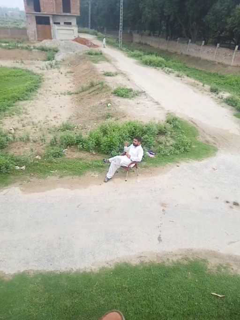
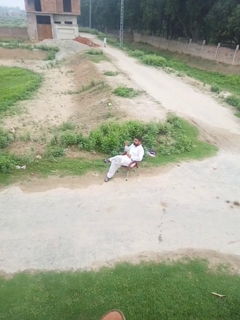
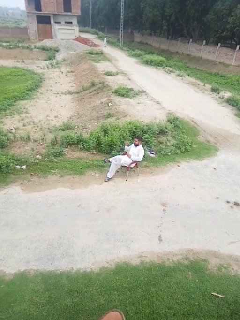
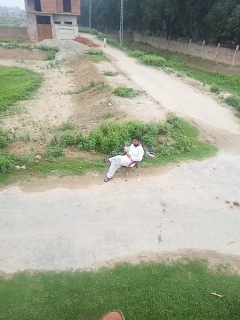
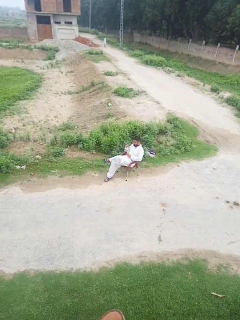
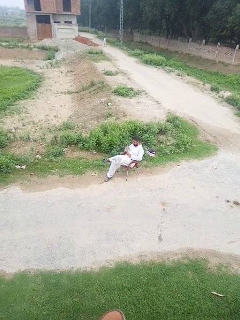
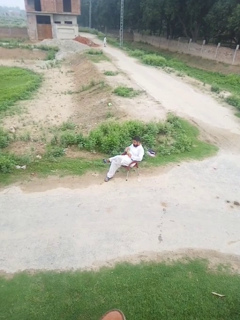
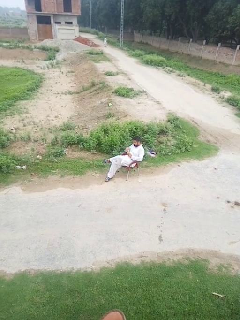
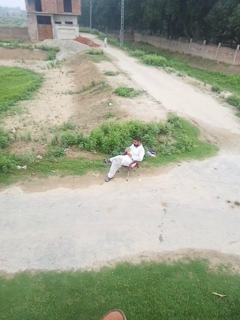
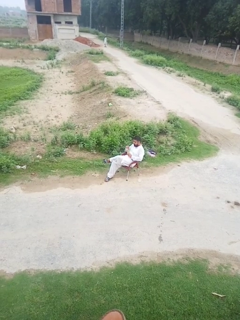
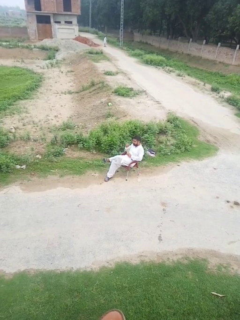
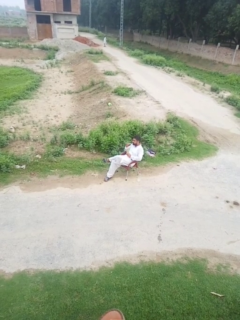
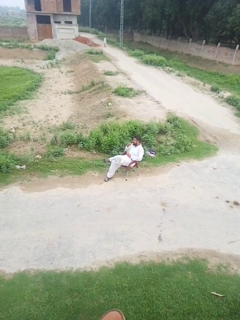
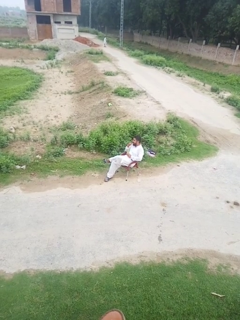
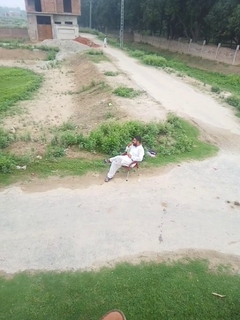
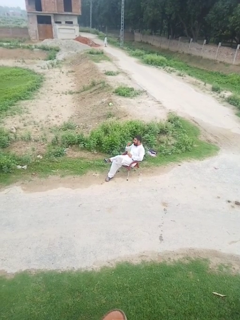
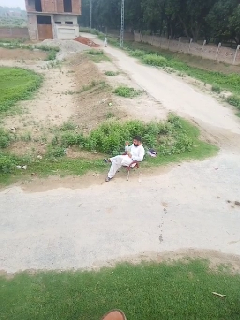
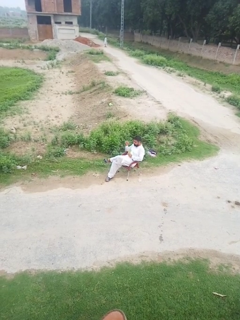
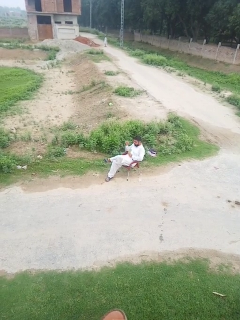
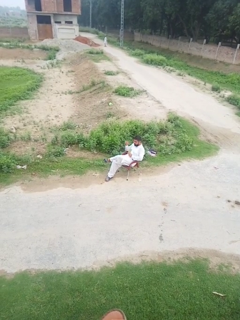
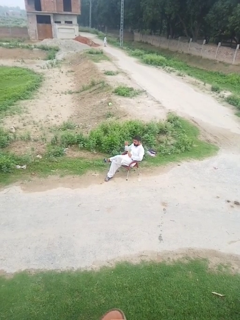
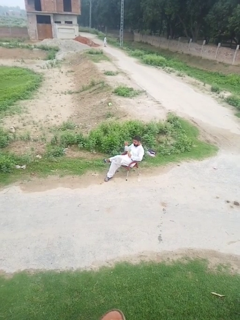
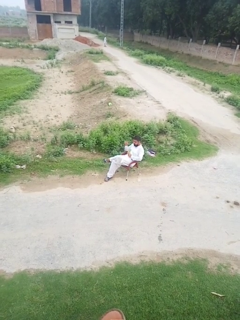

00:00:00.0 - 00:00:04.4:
person eats snack from bag

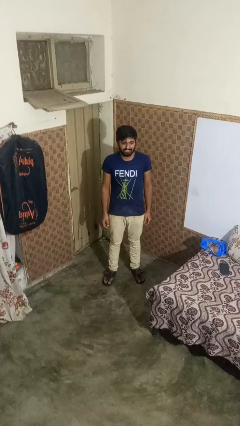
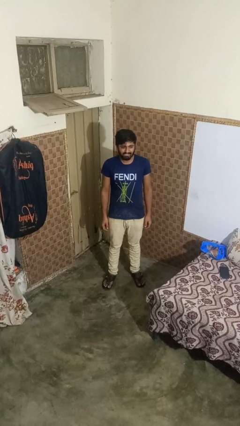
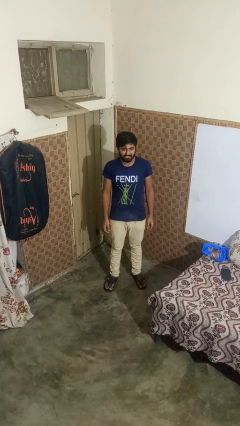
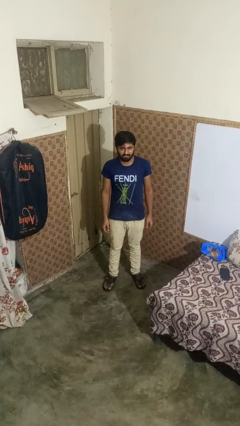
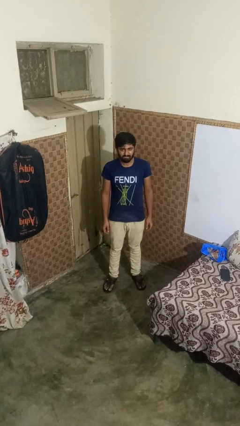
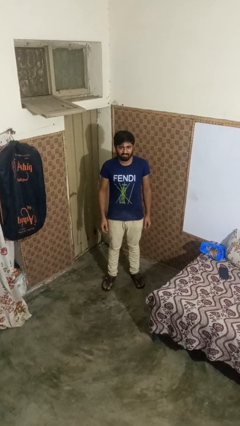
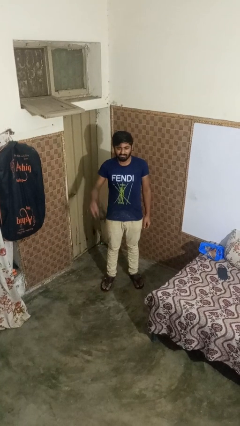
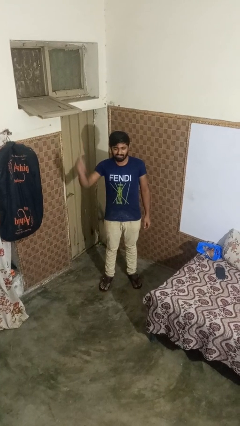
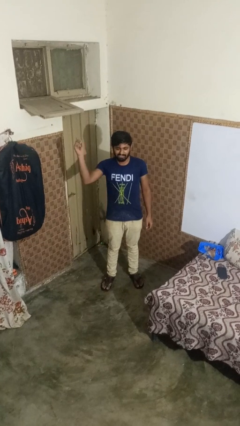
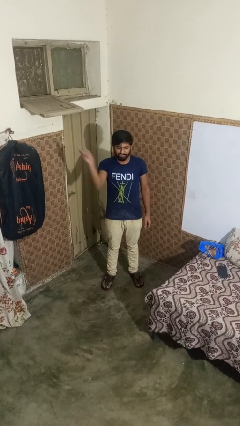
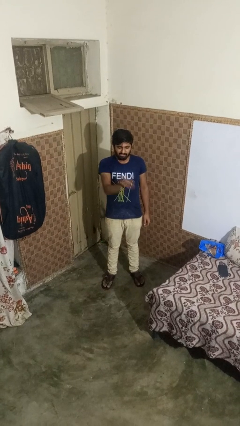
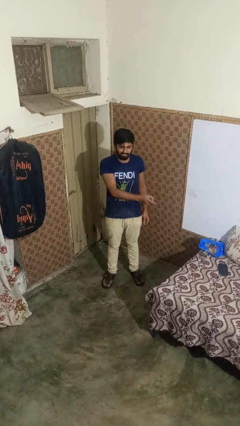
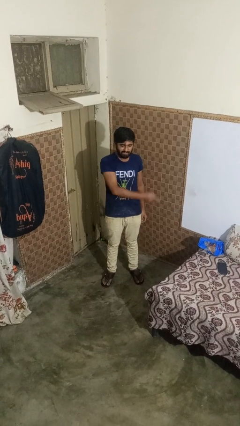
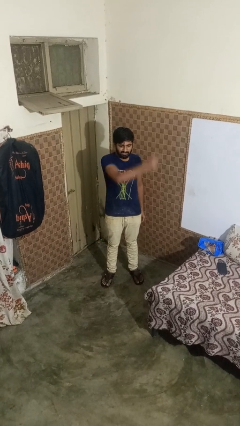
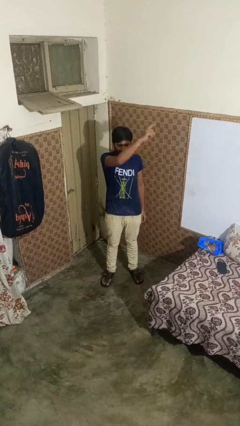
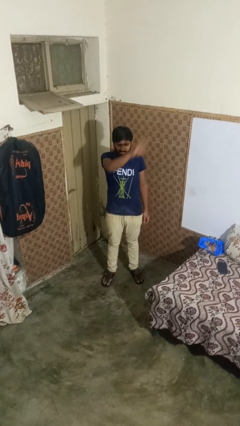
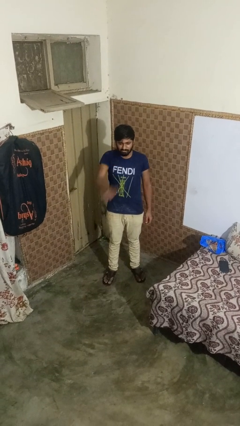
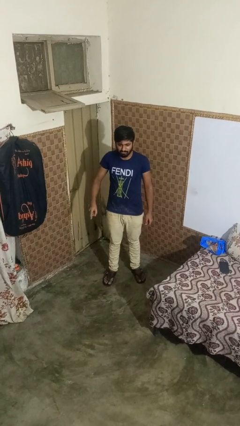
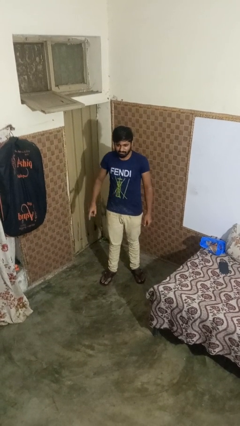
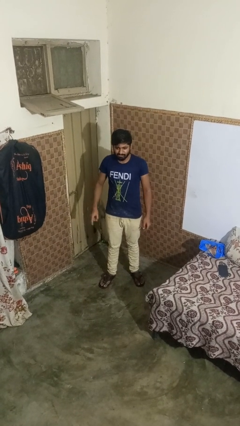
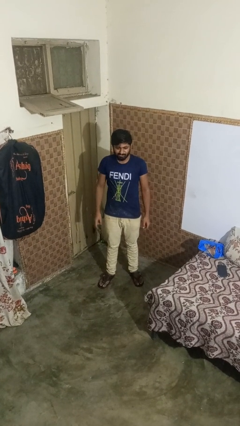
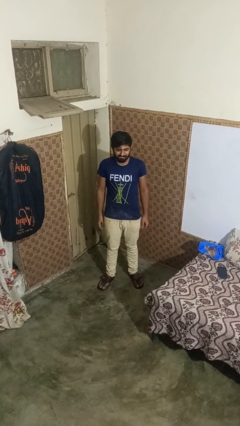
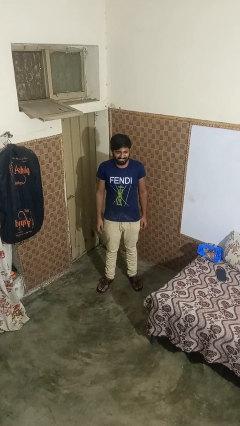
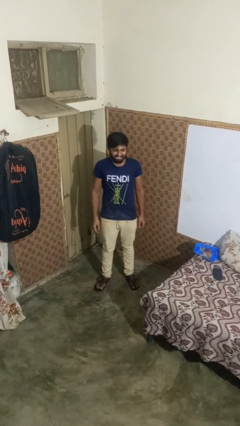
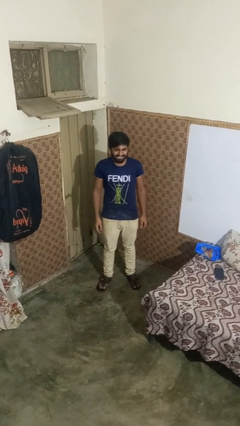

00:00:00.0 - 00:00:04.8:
person gestures cut

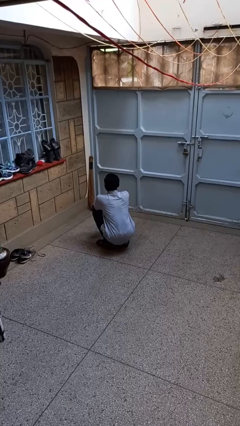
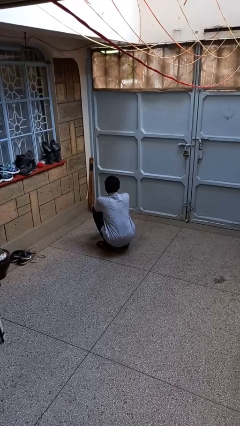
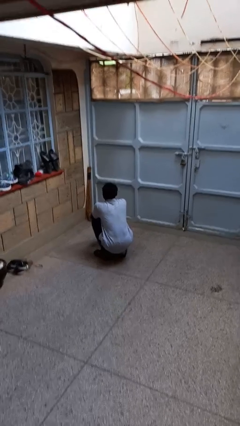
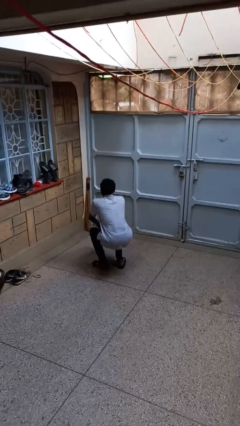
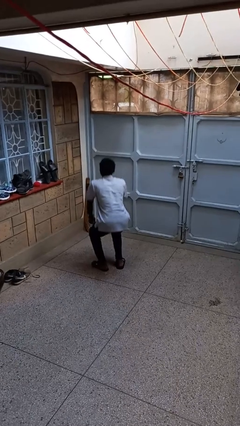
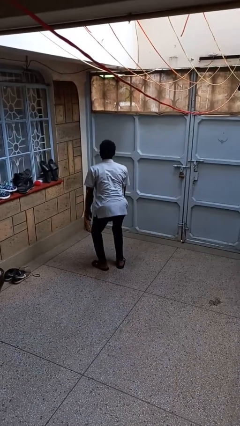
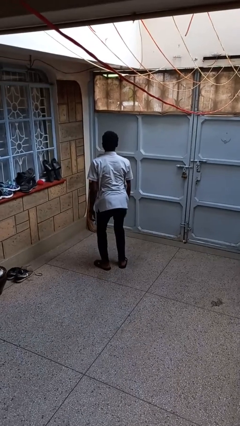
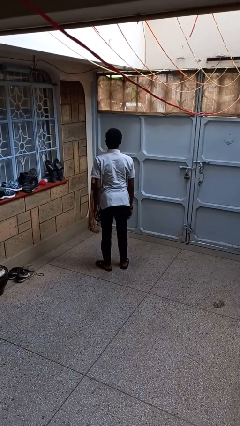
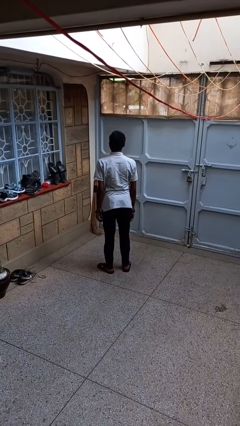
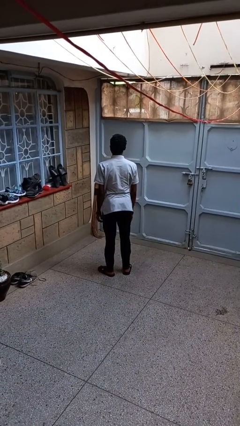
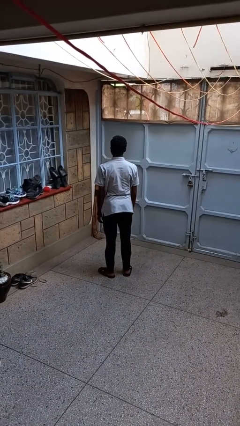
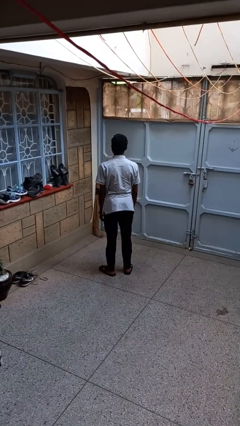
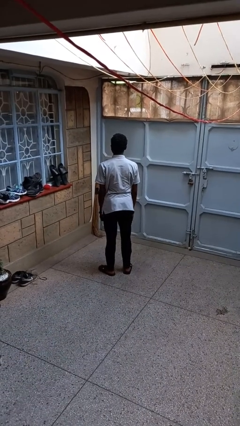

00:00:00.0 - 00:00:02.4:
person stands up

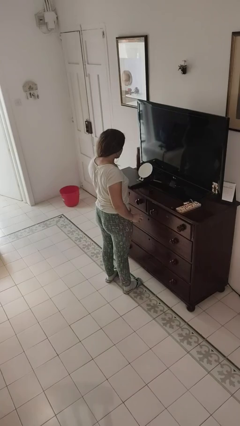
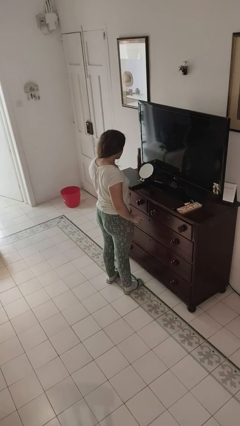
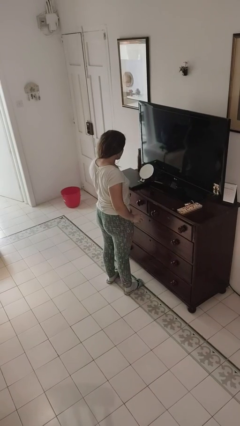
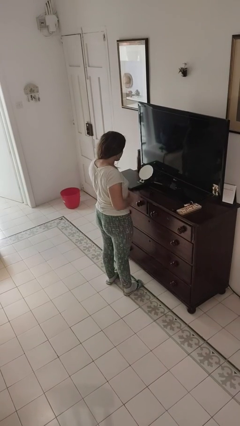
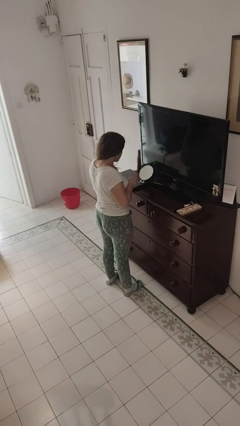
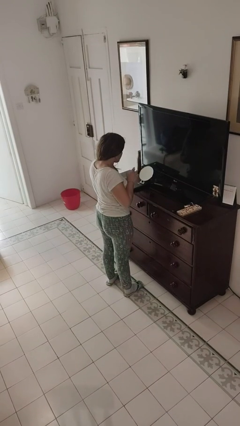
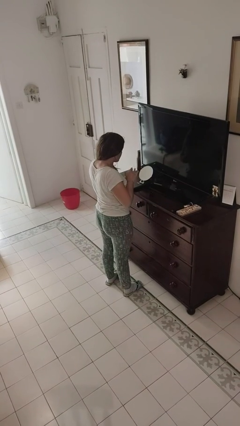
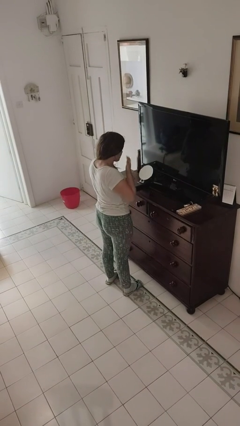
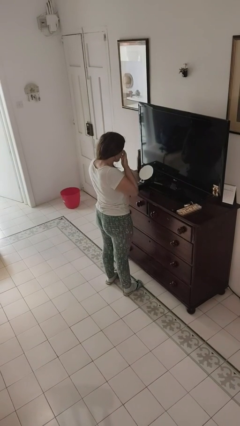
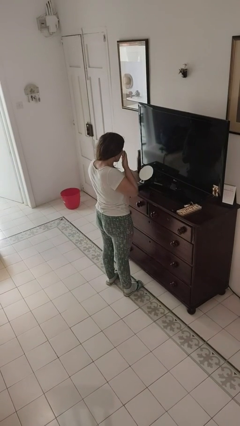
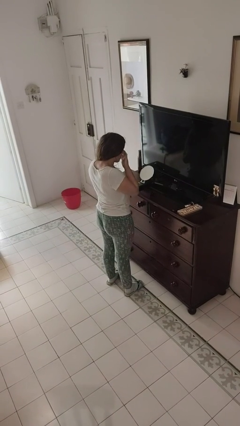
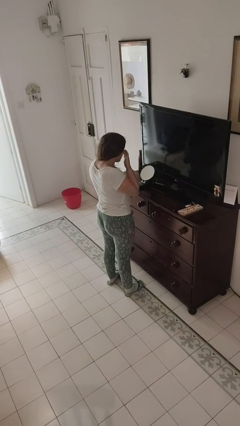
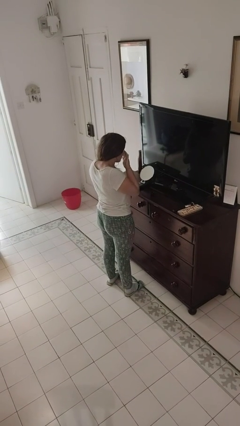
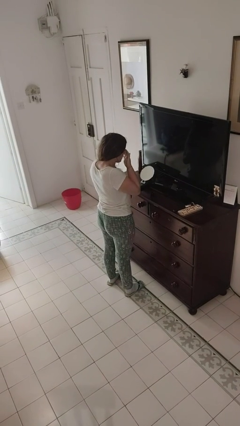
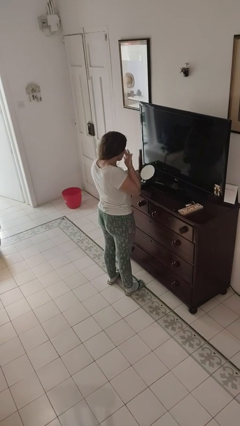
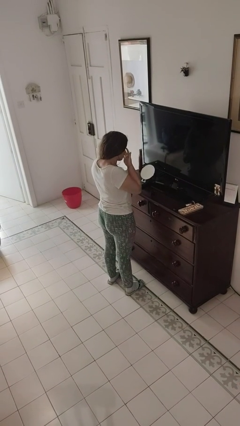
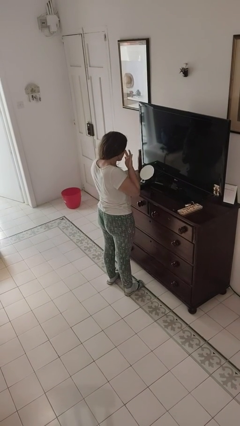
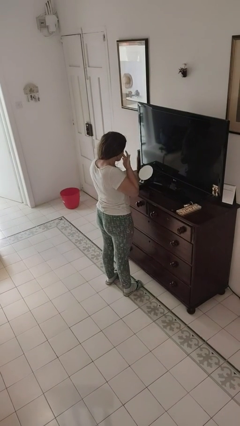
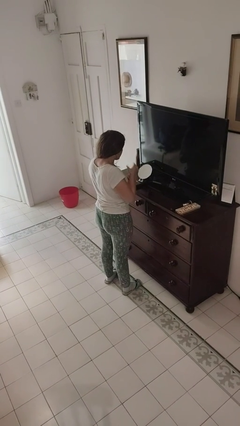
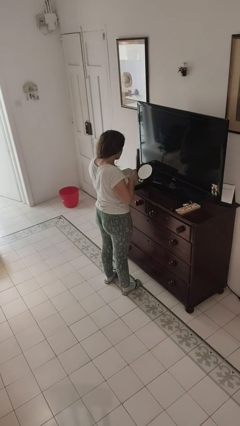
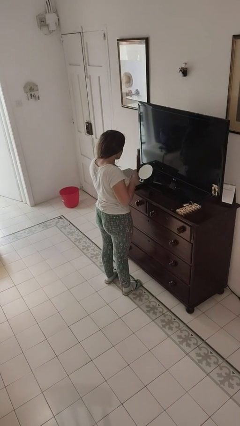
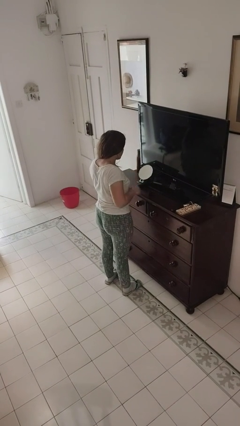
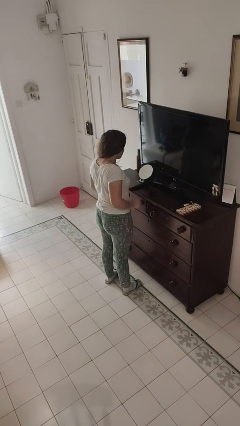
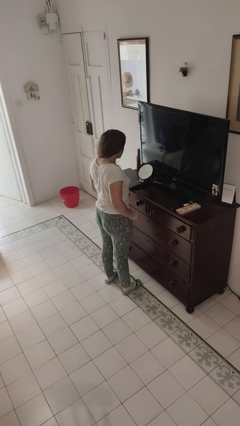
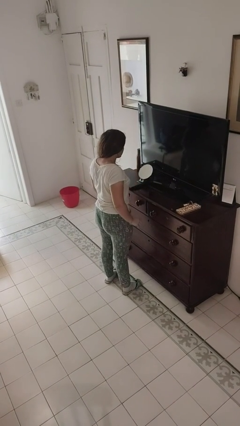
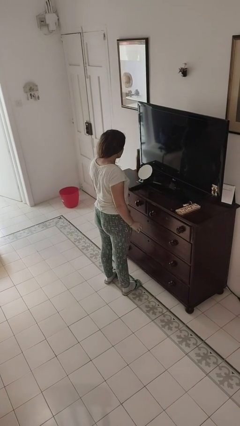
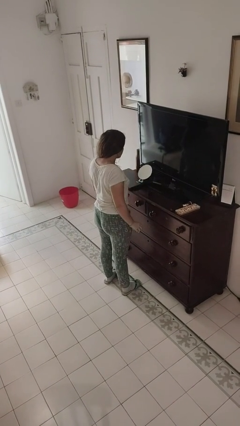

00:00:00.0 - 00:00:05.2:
person applies foundation makeup

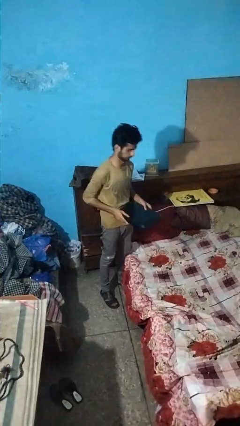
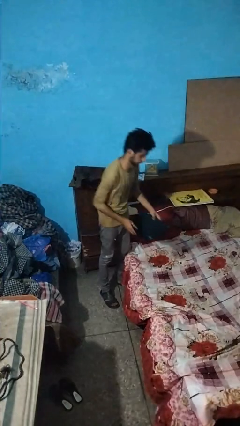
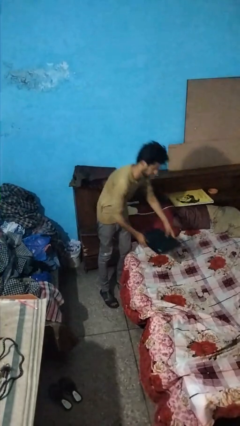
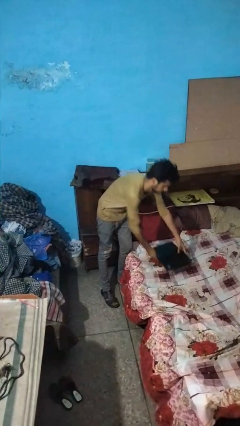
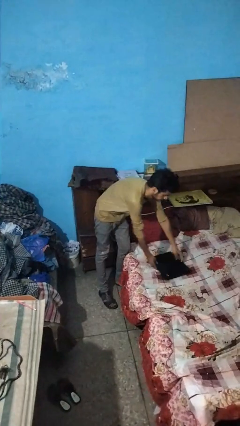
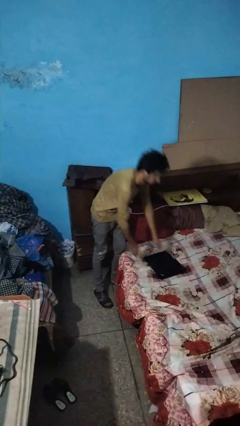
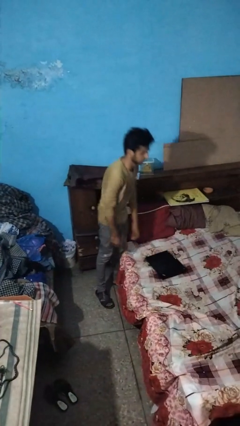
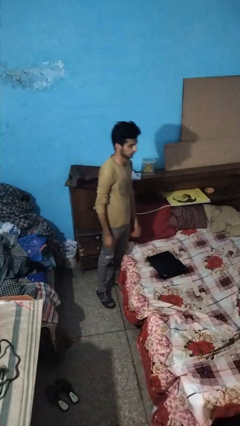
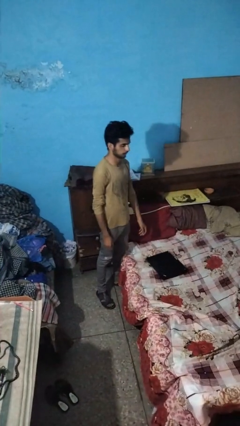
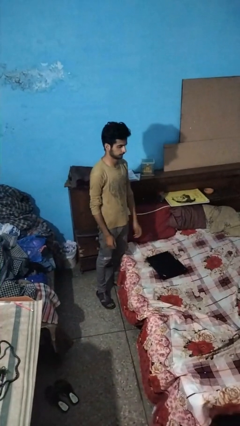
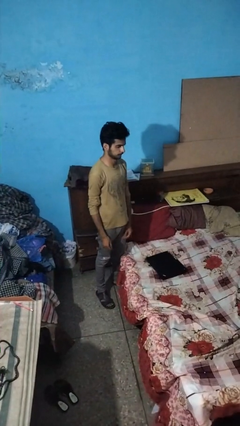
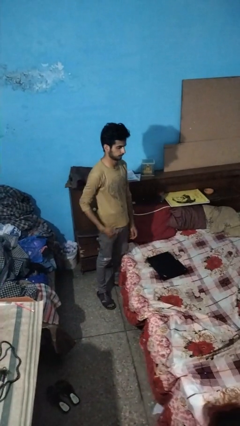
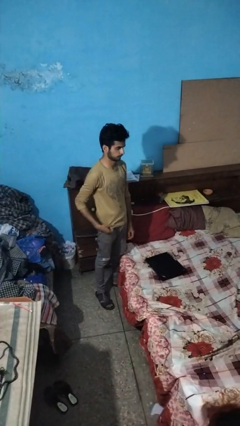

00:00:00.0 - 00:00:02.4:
person puts down object on bed
